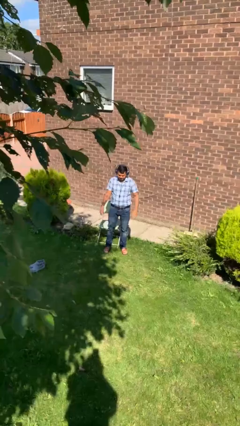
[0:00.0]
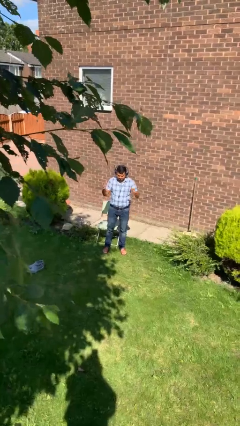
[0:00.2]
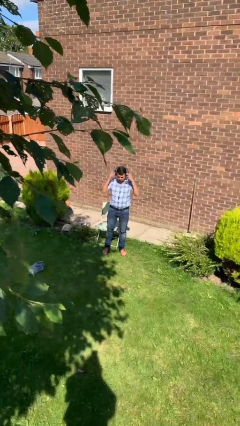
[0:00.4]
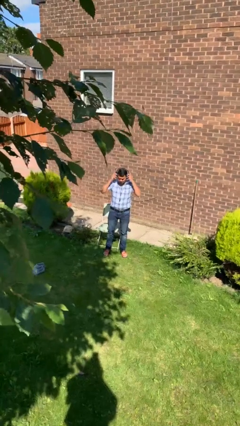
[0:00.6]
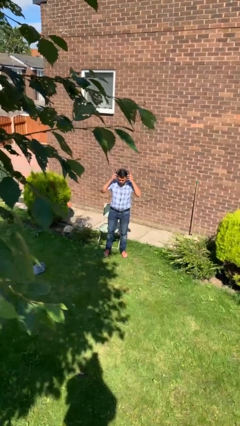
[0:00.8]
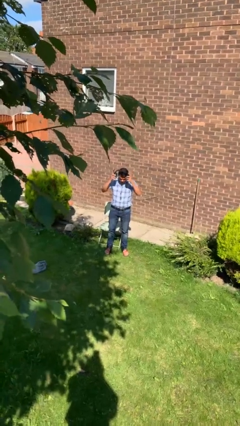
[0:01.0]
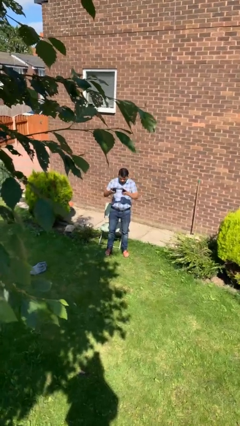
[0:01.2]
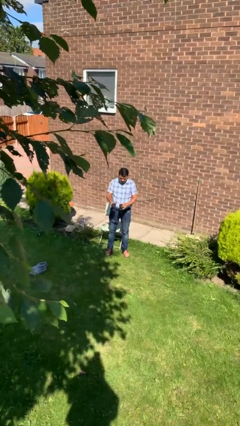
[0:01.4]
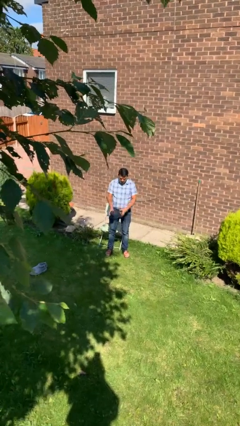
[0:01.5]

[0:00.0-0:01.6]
person takes off headphones

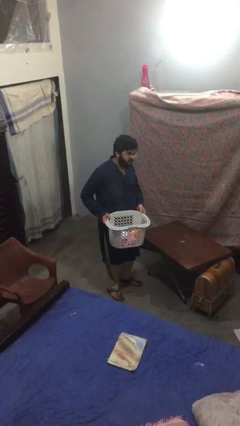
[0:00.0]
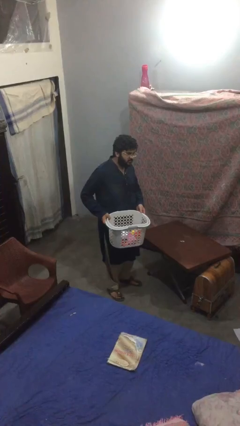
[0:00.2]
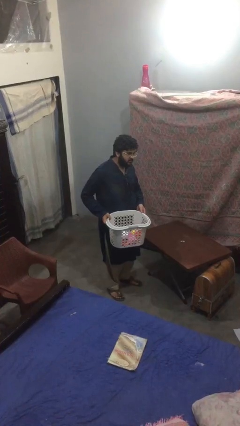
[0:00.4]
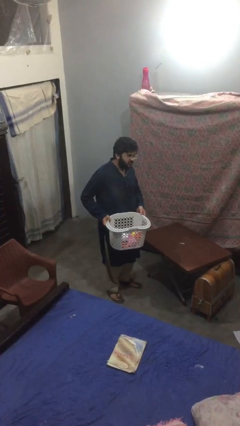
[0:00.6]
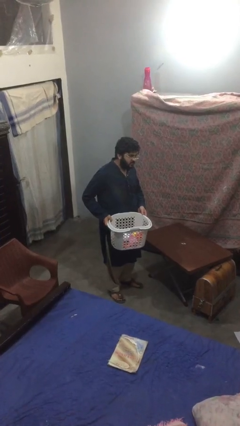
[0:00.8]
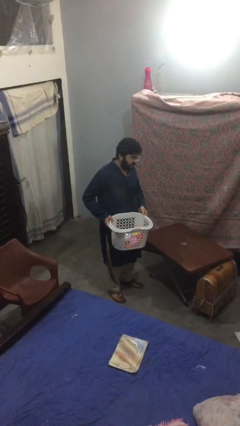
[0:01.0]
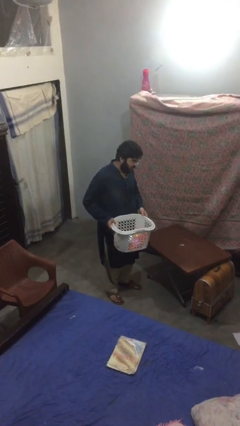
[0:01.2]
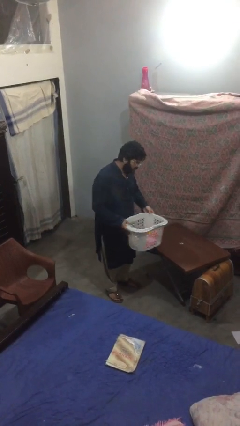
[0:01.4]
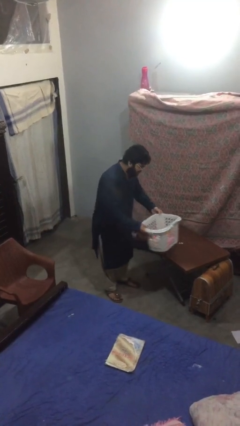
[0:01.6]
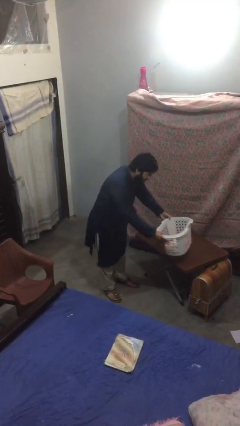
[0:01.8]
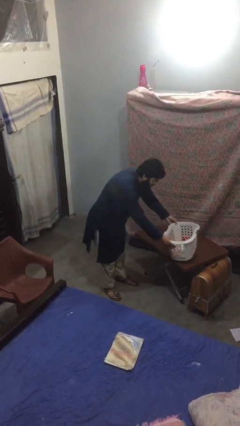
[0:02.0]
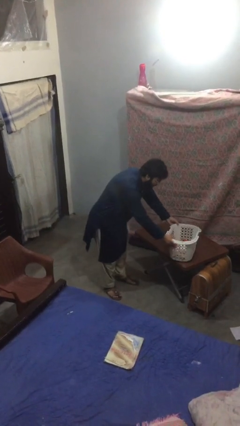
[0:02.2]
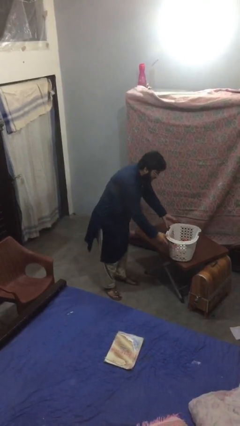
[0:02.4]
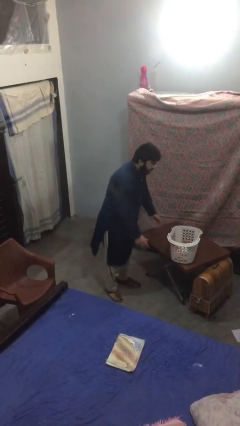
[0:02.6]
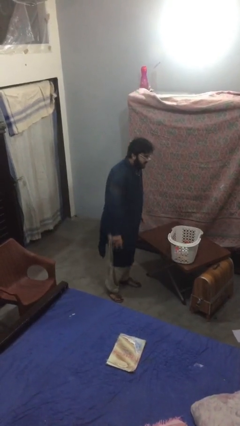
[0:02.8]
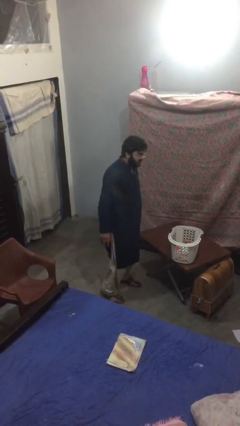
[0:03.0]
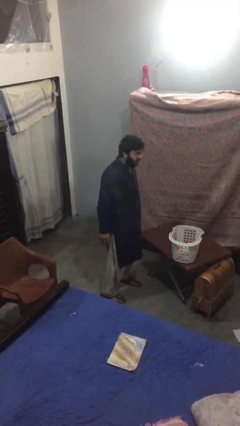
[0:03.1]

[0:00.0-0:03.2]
person puts down object on table

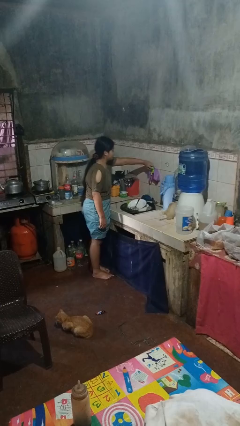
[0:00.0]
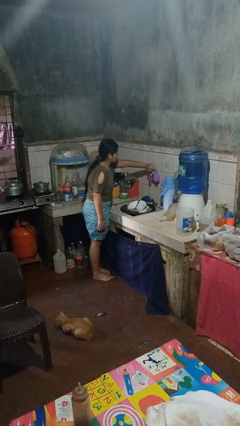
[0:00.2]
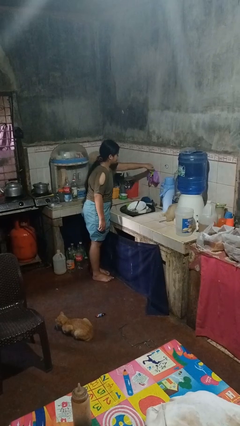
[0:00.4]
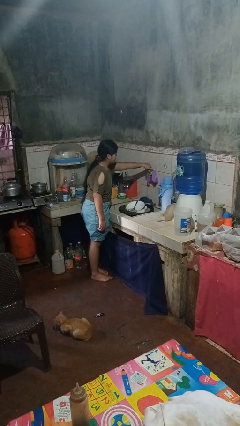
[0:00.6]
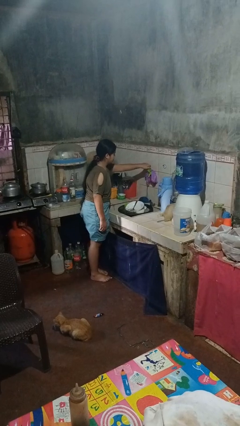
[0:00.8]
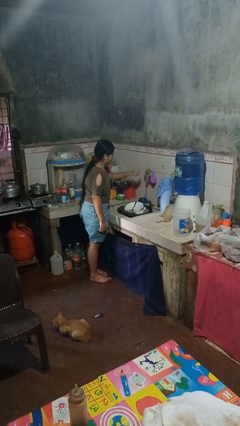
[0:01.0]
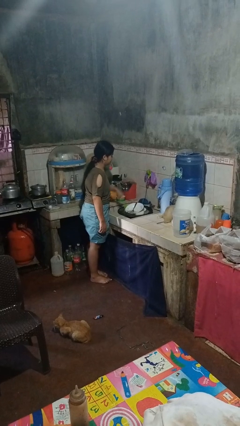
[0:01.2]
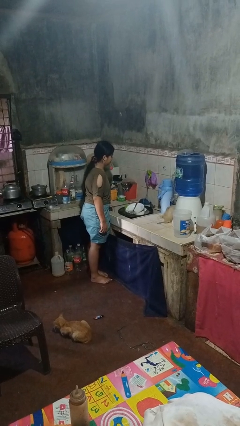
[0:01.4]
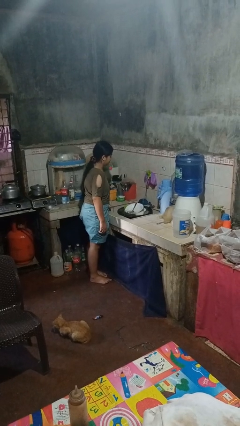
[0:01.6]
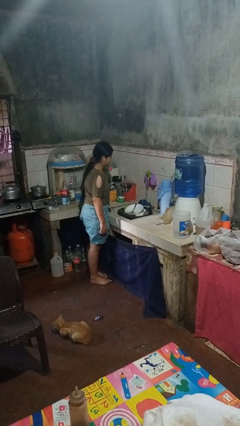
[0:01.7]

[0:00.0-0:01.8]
person turns on faucet

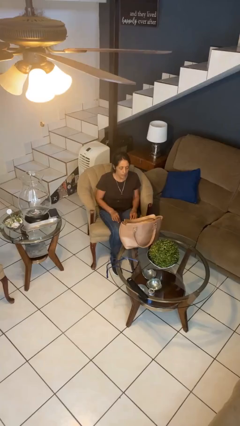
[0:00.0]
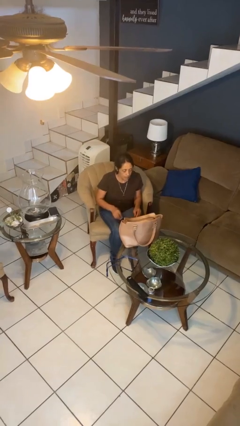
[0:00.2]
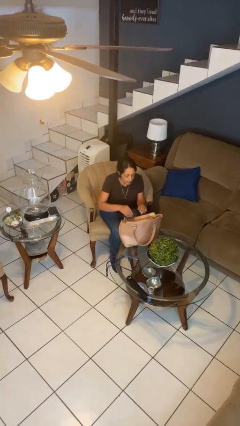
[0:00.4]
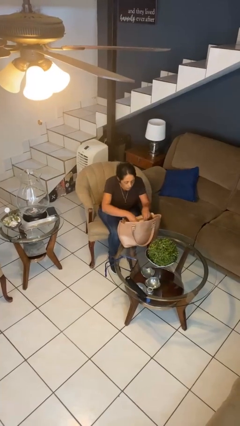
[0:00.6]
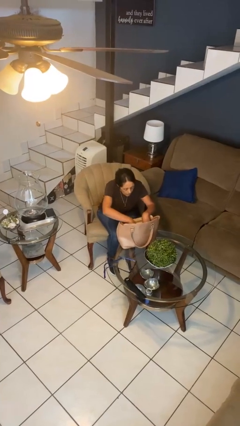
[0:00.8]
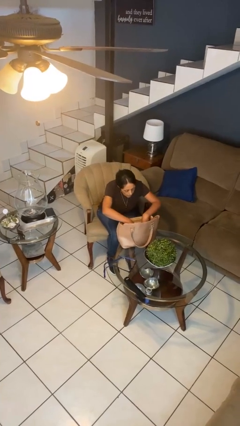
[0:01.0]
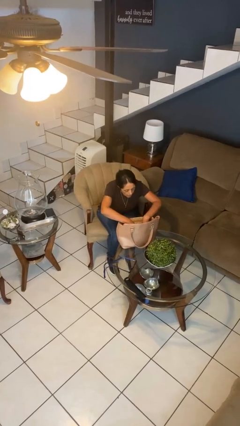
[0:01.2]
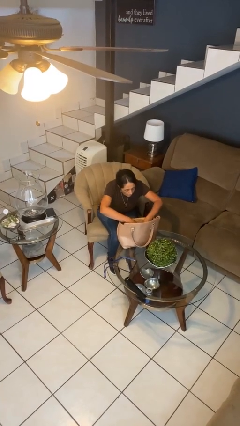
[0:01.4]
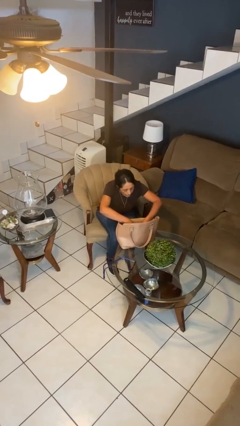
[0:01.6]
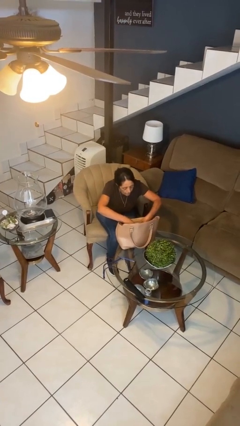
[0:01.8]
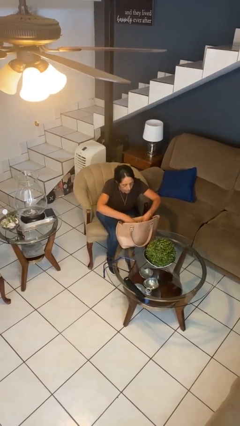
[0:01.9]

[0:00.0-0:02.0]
person searches in purse

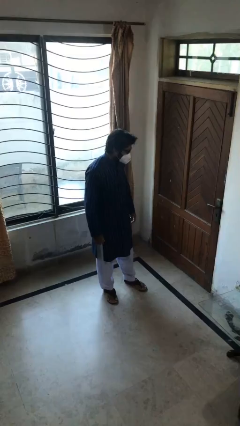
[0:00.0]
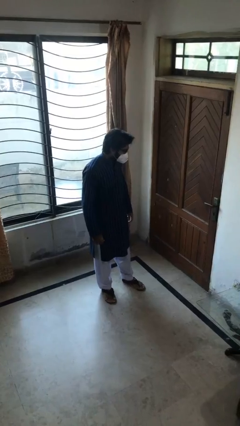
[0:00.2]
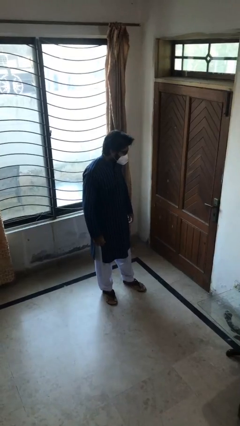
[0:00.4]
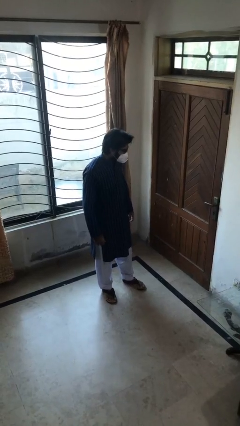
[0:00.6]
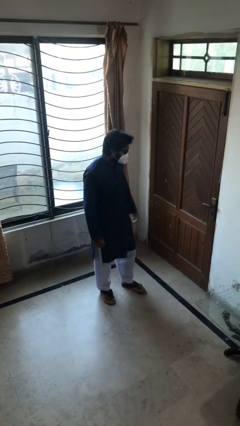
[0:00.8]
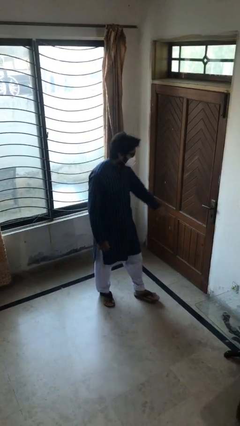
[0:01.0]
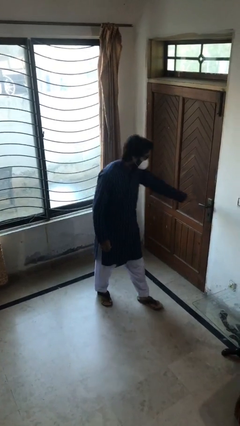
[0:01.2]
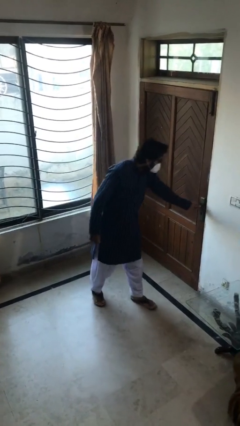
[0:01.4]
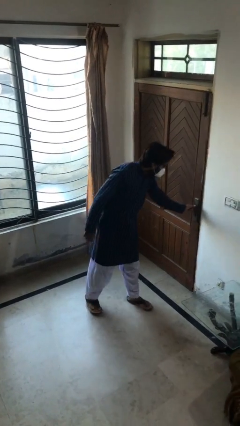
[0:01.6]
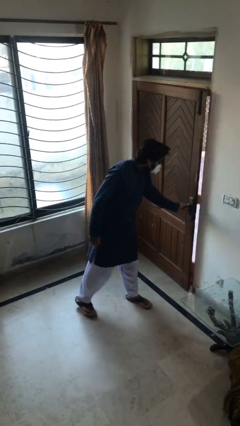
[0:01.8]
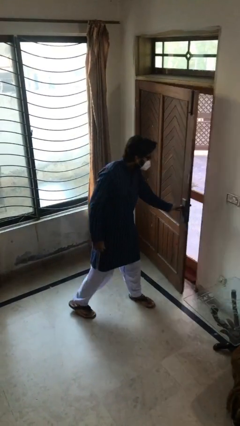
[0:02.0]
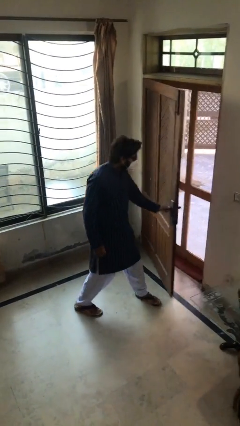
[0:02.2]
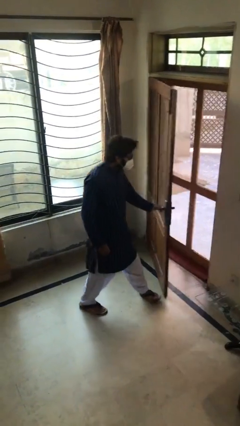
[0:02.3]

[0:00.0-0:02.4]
person opens facility door

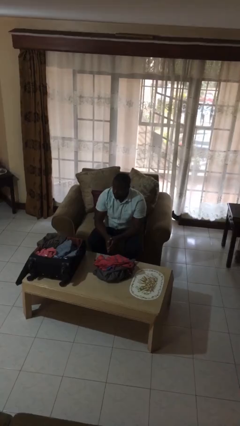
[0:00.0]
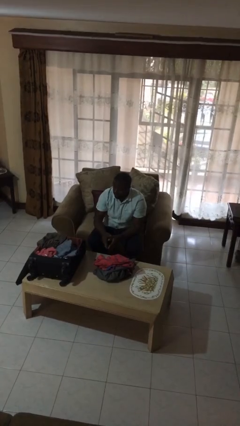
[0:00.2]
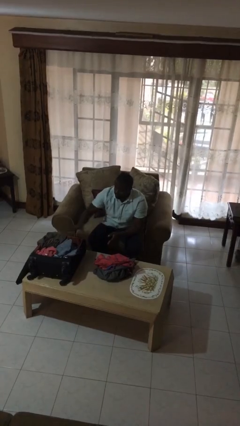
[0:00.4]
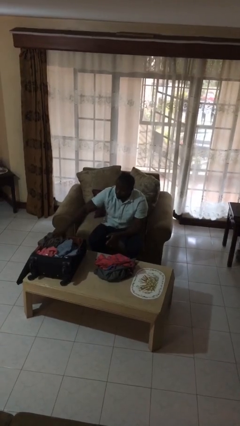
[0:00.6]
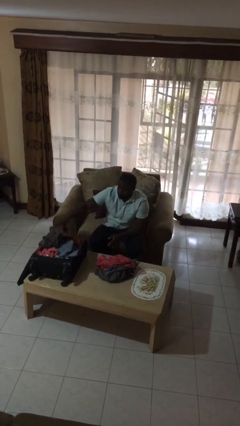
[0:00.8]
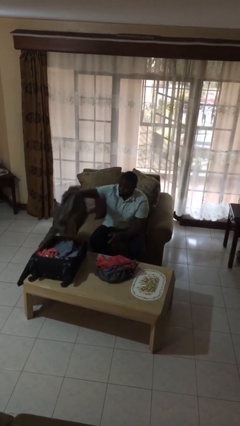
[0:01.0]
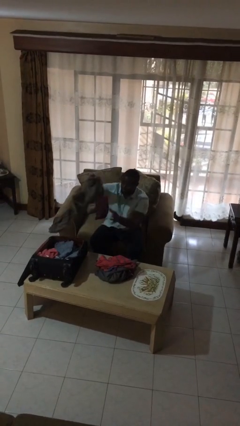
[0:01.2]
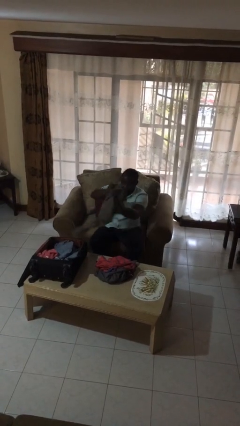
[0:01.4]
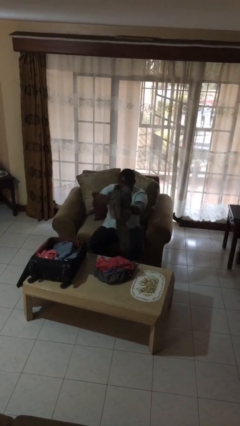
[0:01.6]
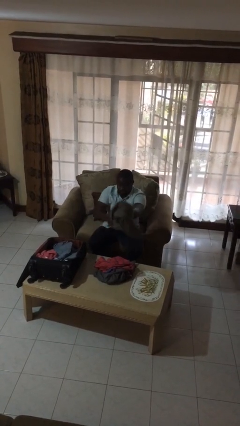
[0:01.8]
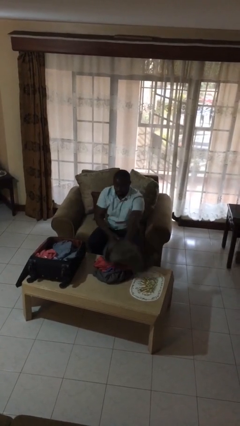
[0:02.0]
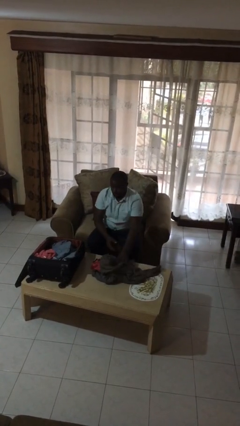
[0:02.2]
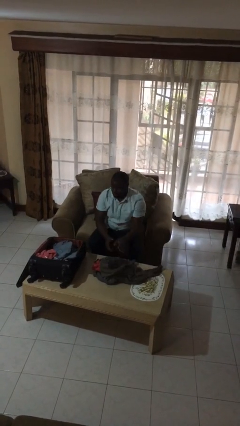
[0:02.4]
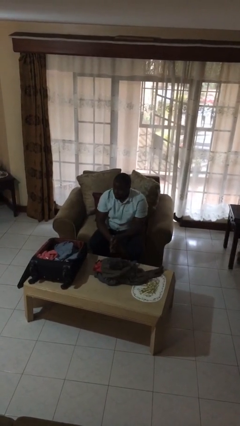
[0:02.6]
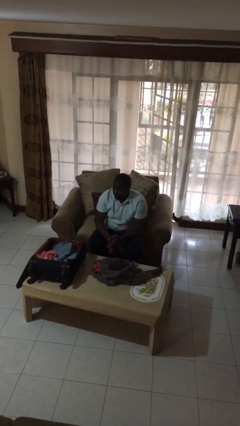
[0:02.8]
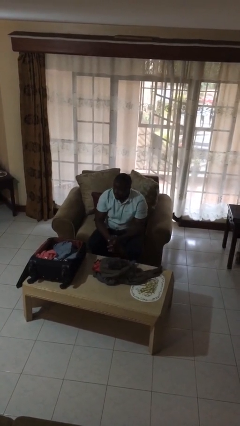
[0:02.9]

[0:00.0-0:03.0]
person unloads clothes from suitcase

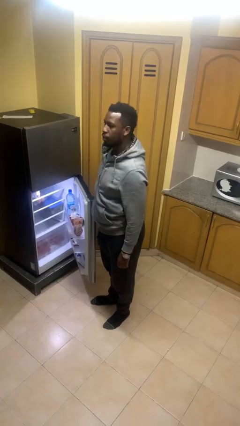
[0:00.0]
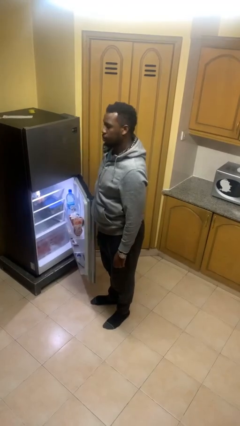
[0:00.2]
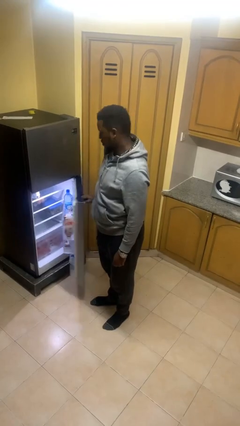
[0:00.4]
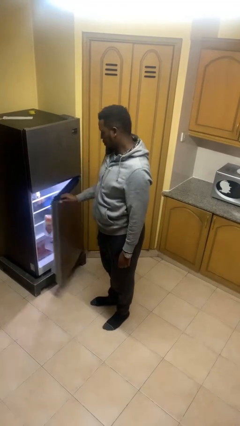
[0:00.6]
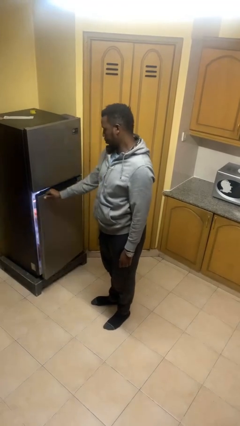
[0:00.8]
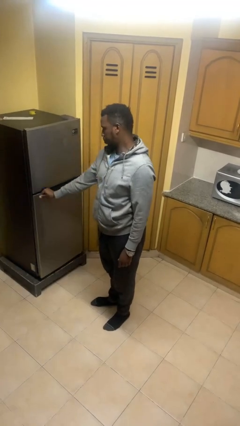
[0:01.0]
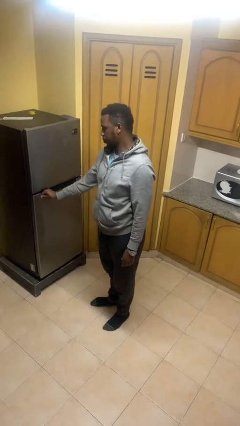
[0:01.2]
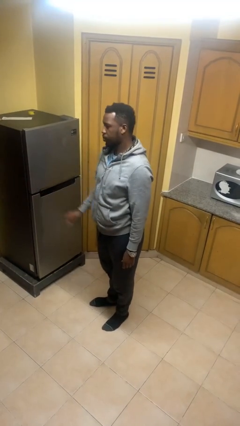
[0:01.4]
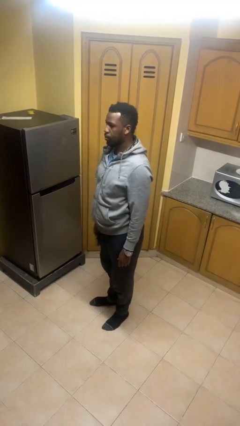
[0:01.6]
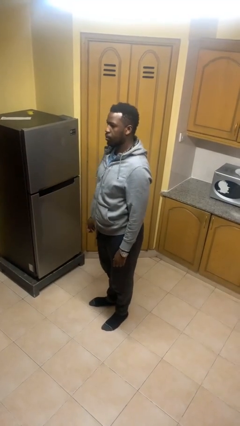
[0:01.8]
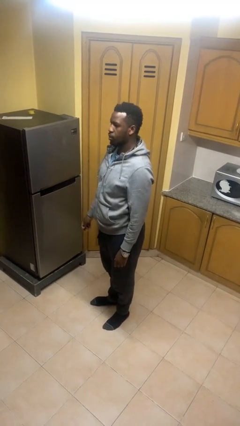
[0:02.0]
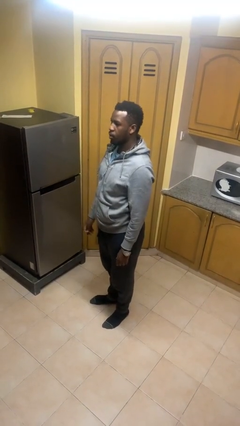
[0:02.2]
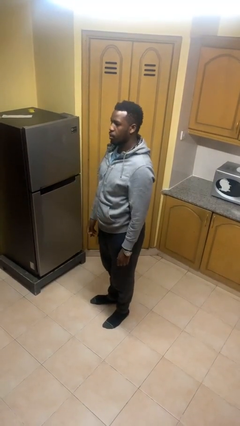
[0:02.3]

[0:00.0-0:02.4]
person closes refrigerator

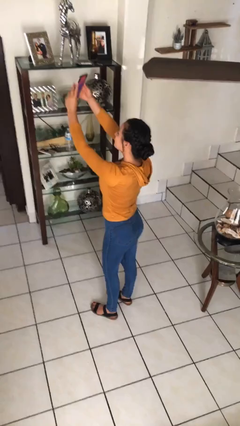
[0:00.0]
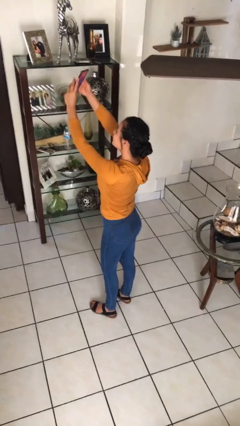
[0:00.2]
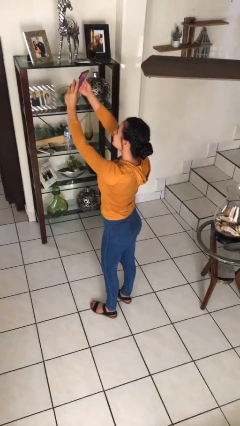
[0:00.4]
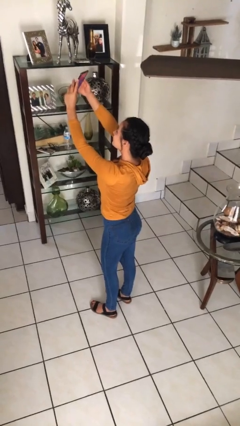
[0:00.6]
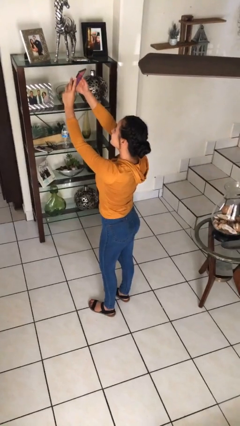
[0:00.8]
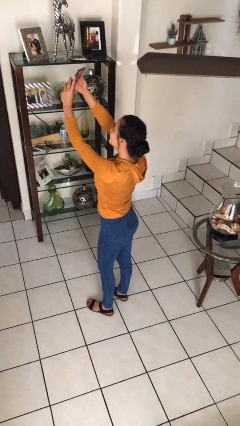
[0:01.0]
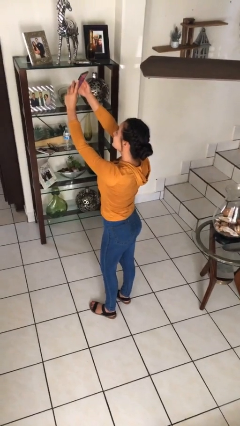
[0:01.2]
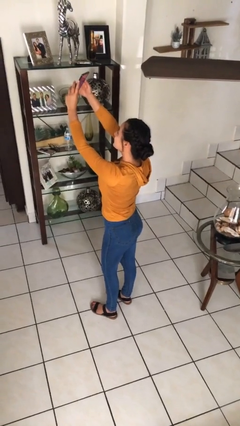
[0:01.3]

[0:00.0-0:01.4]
person takes selfie
